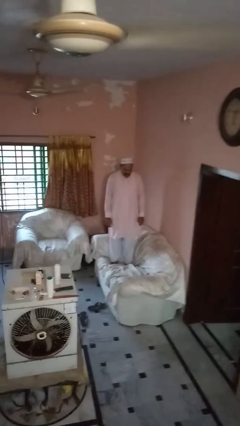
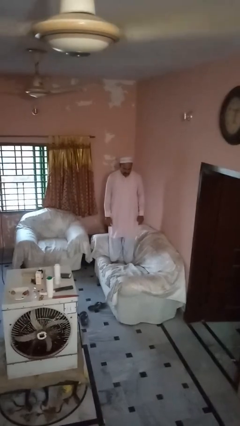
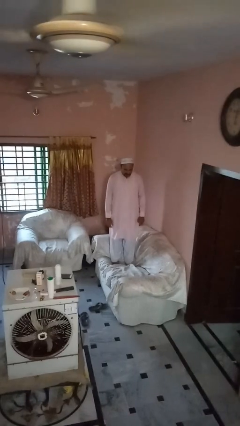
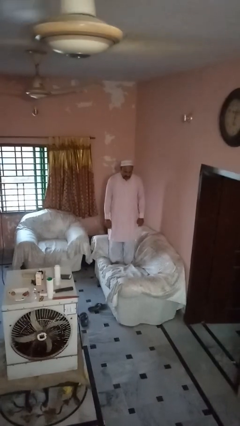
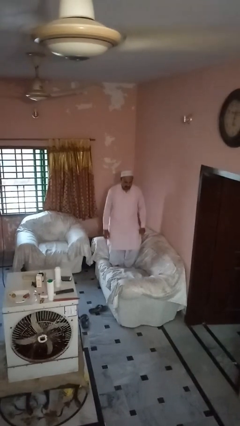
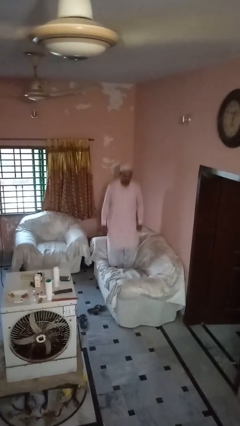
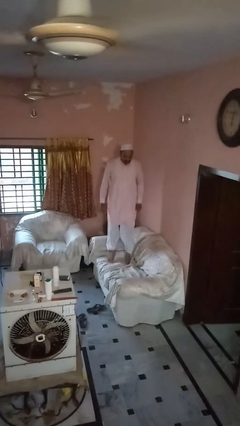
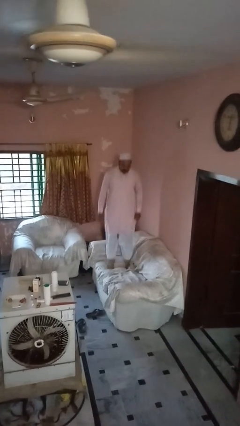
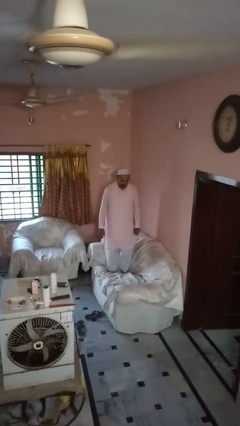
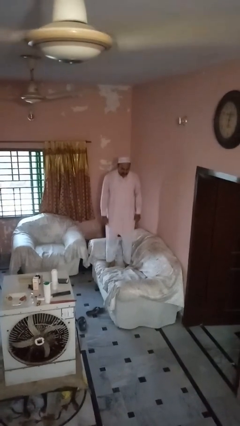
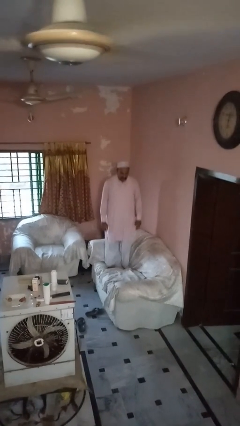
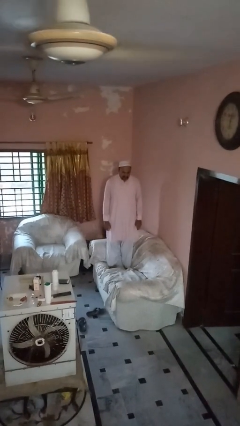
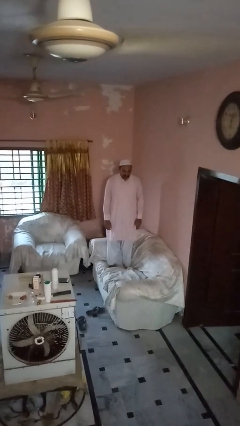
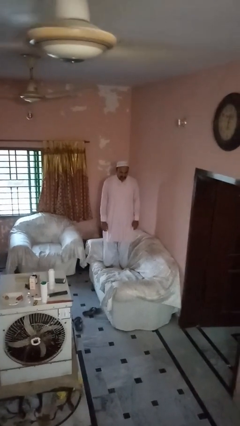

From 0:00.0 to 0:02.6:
person jumps on couch

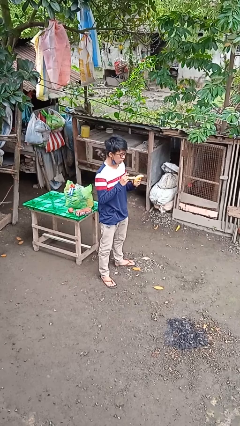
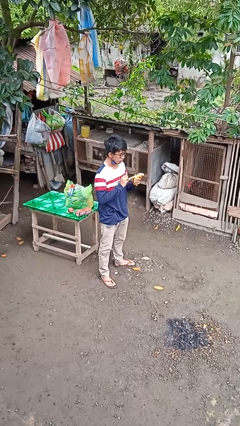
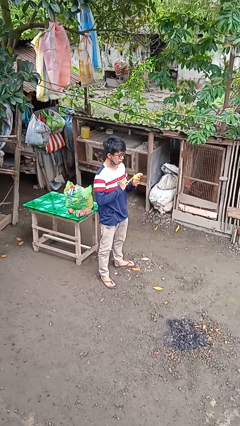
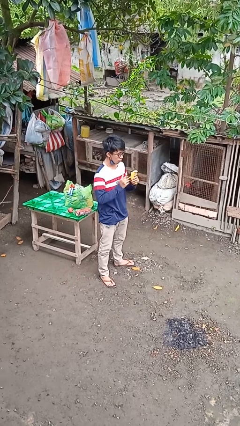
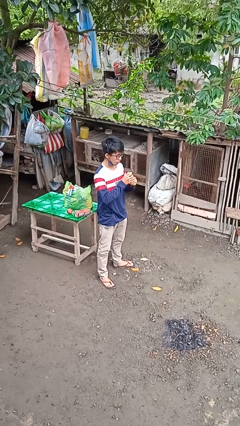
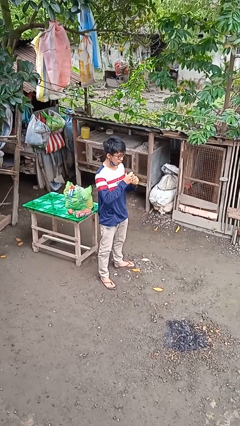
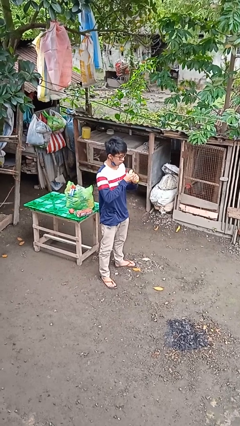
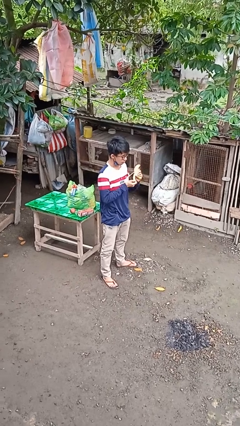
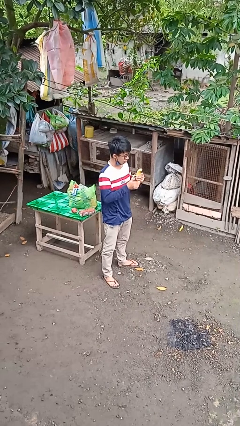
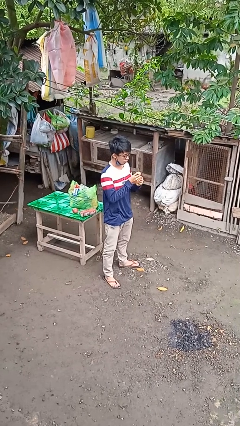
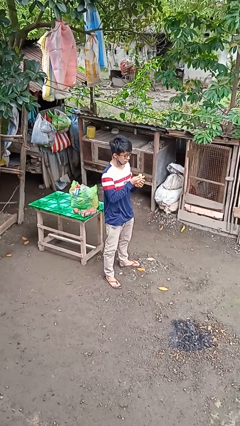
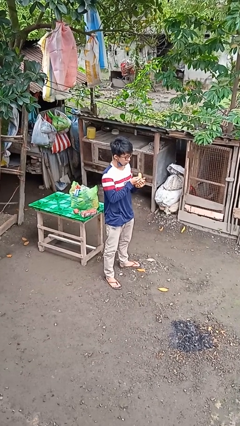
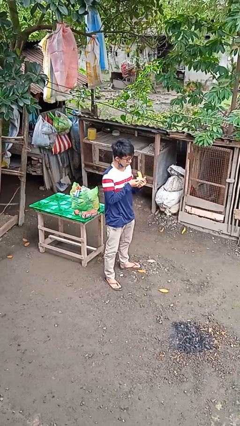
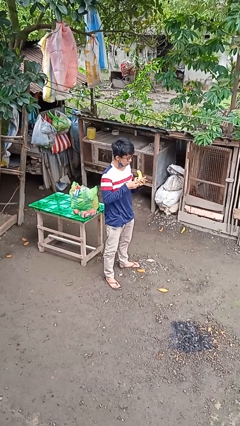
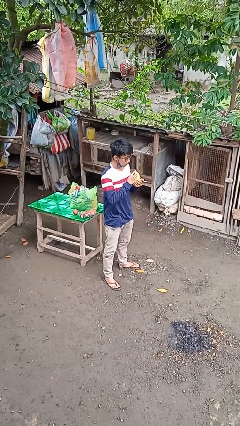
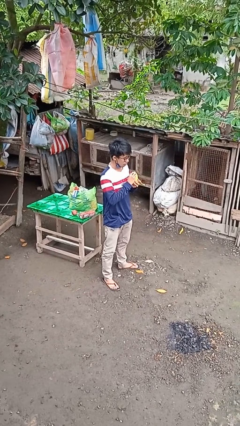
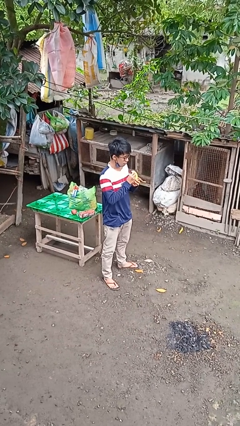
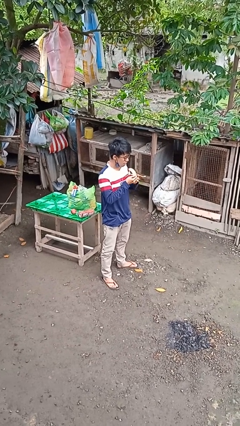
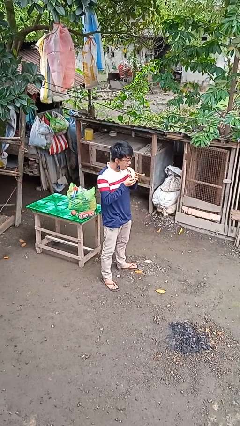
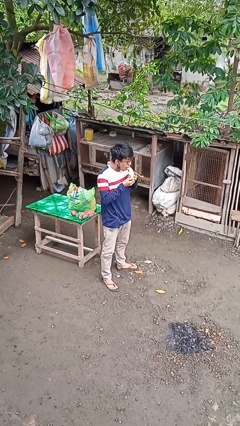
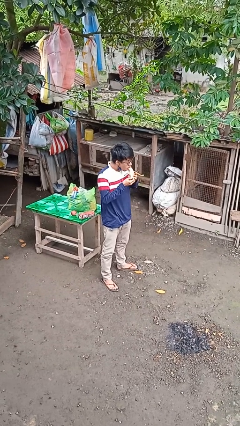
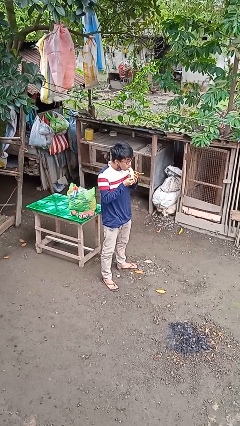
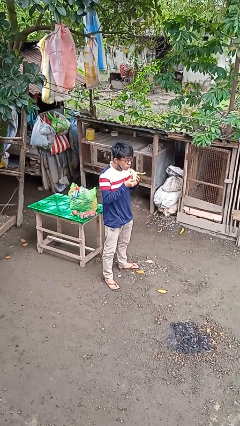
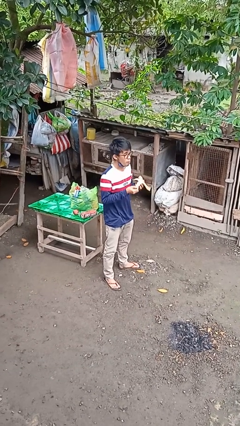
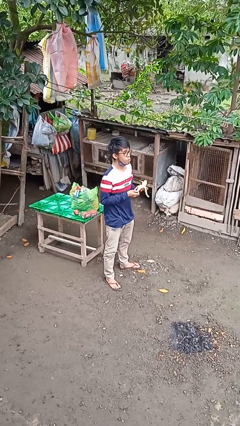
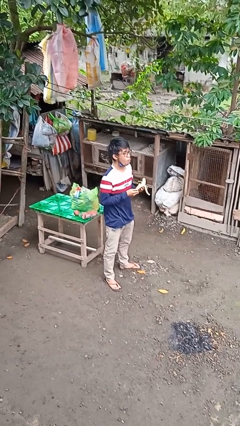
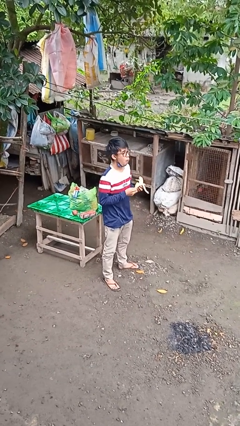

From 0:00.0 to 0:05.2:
person eats banana

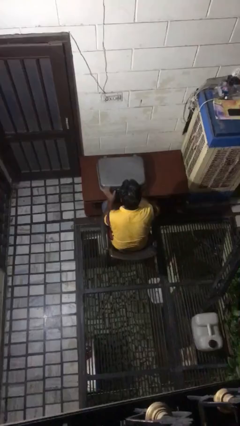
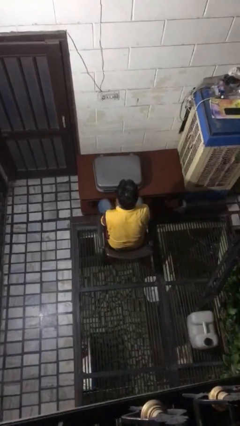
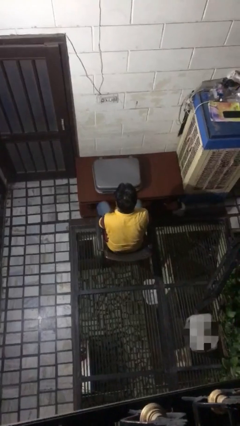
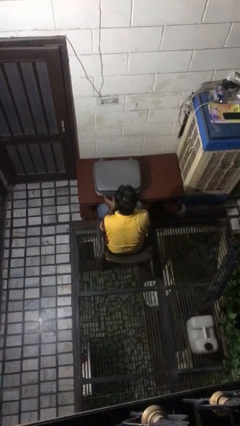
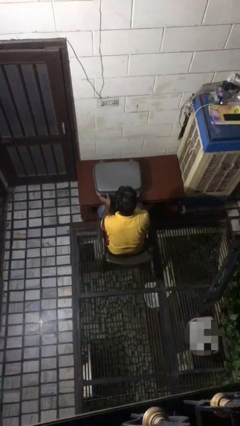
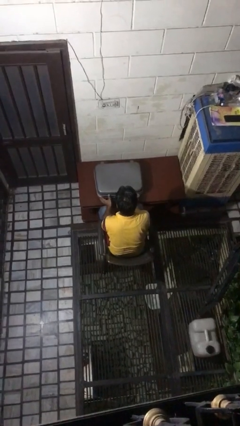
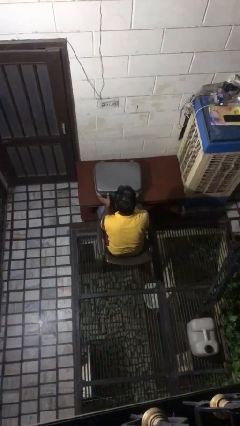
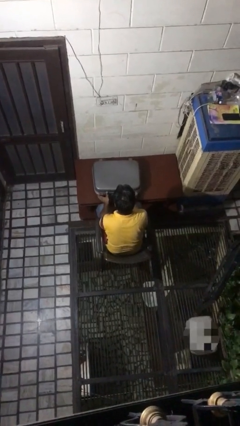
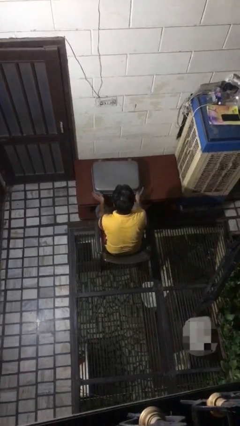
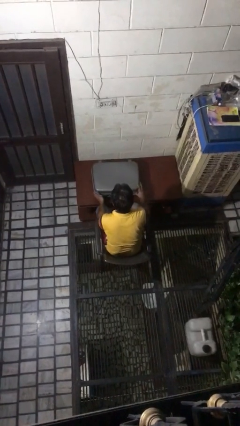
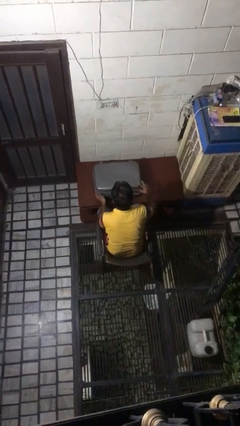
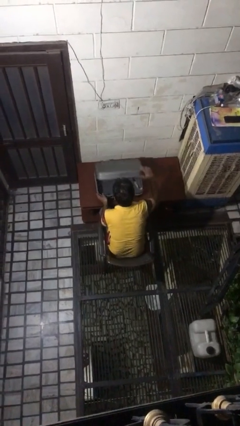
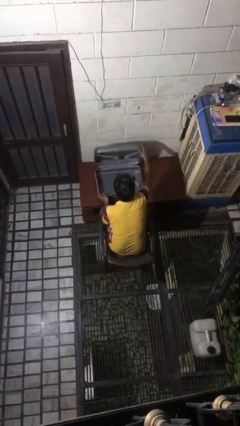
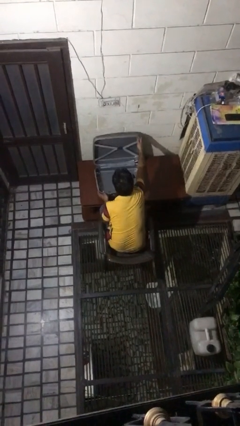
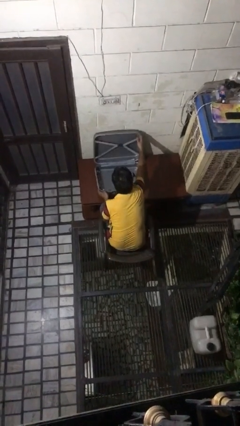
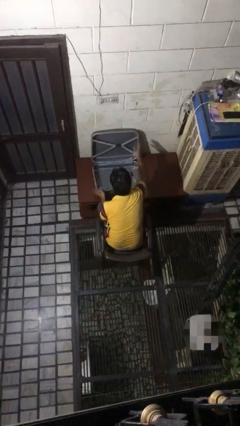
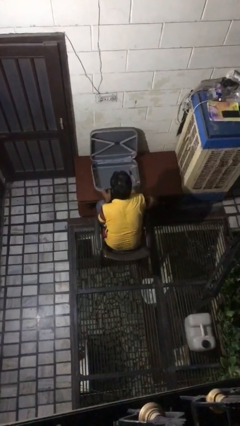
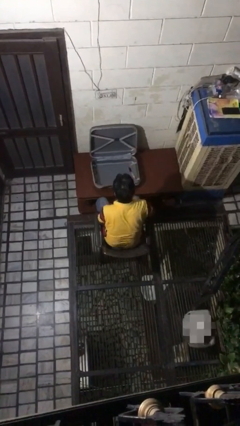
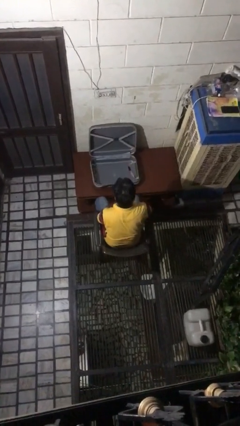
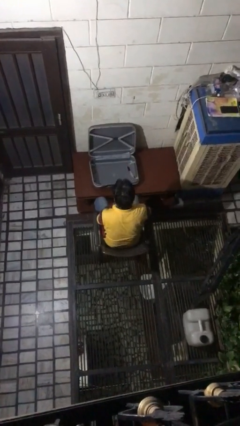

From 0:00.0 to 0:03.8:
person opens suitcase

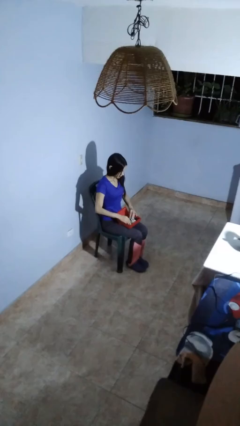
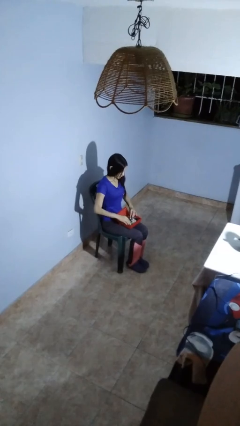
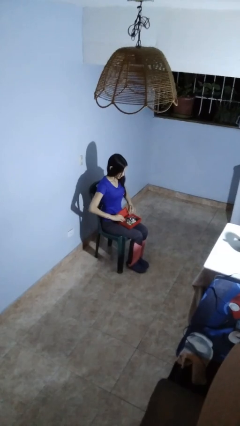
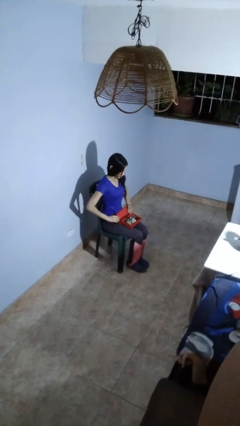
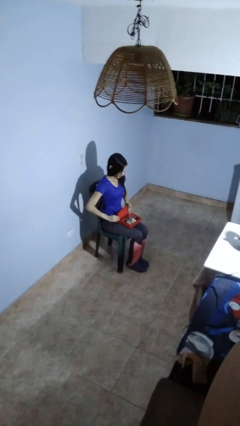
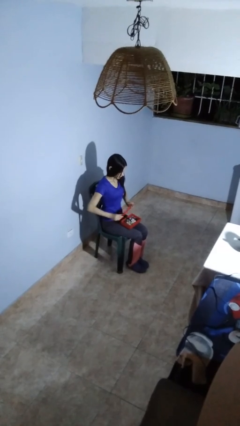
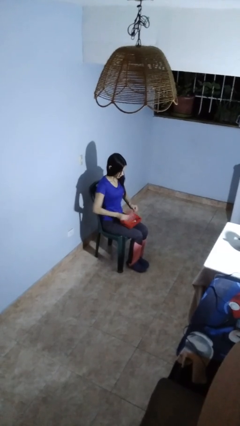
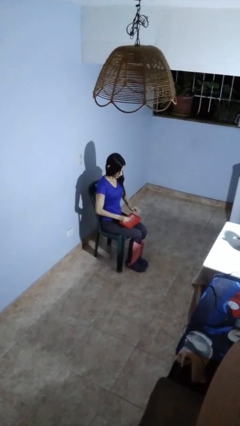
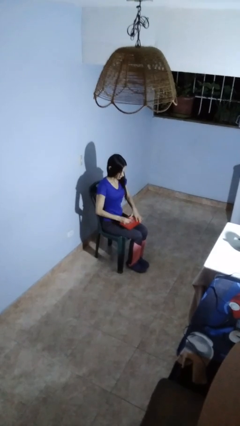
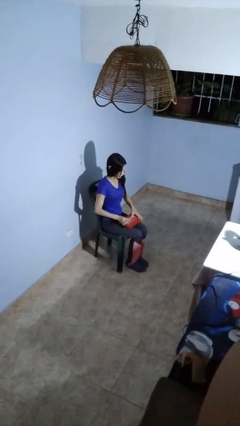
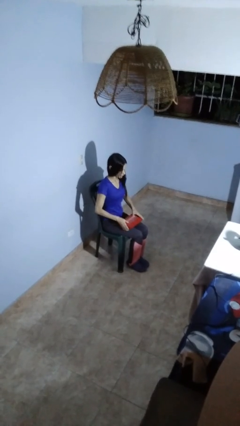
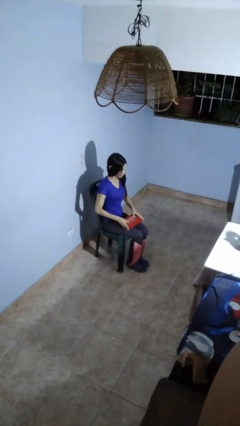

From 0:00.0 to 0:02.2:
person closes jewelry box

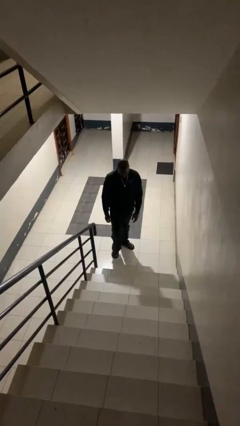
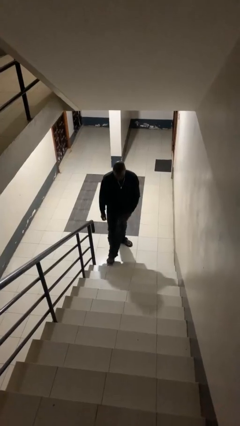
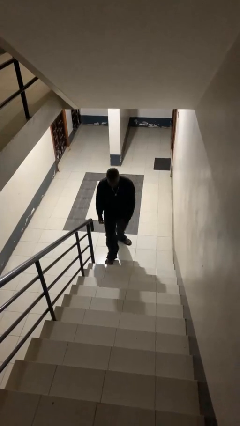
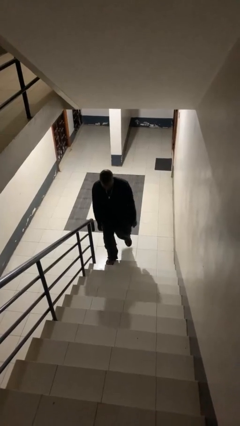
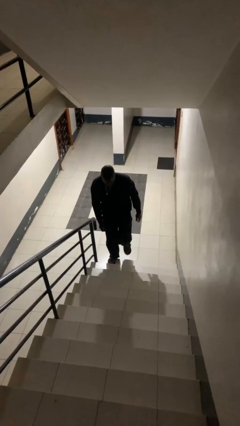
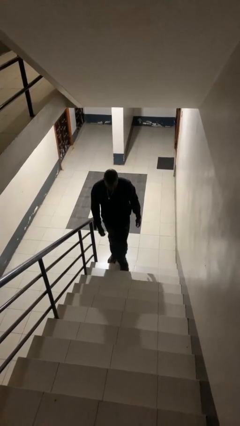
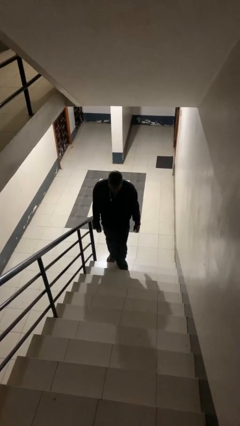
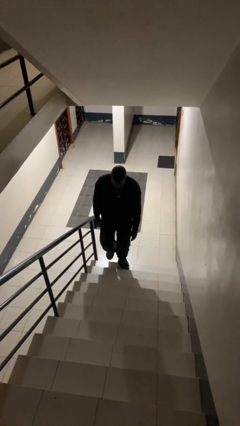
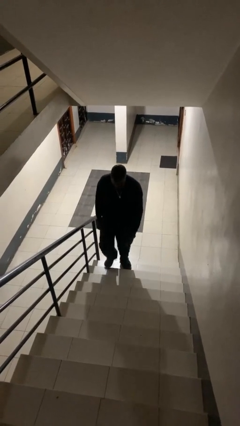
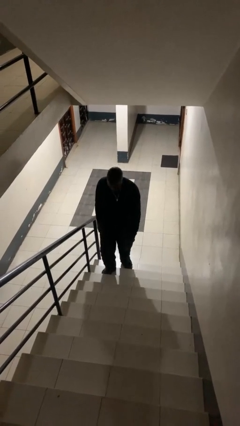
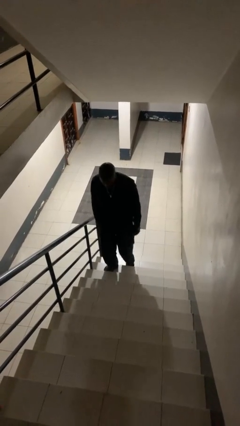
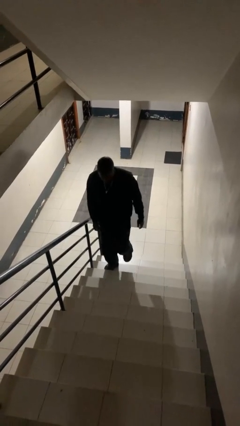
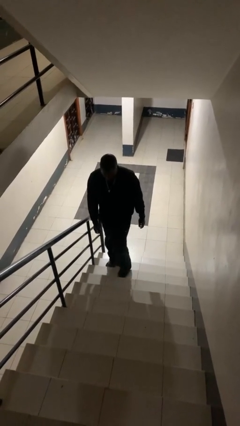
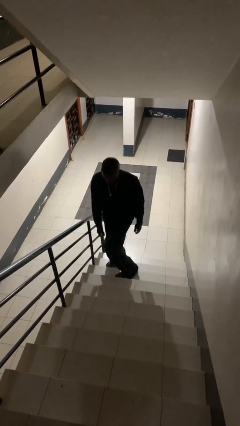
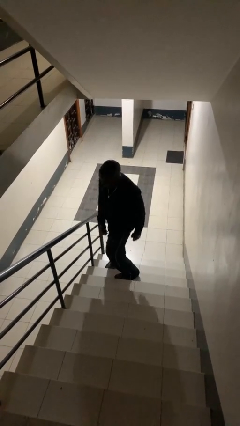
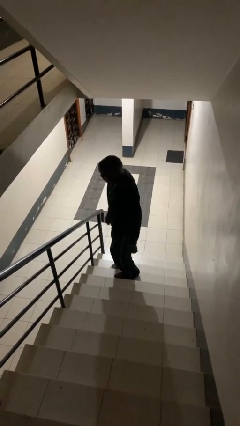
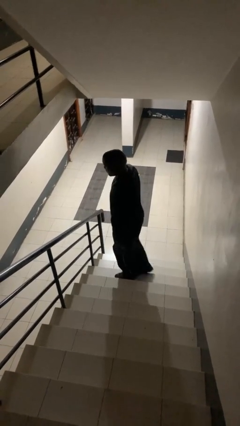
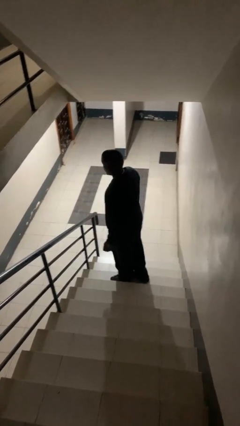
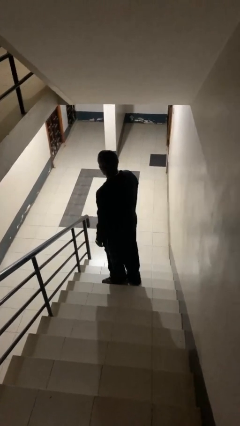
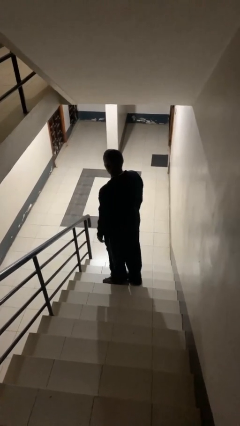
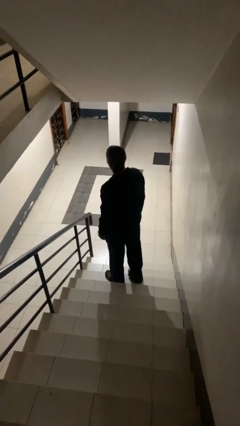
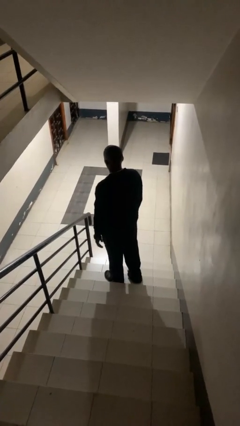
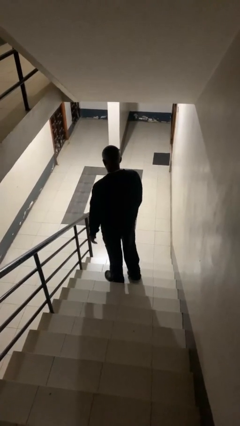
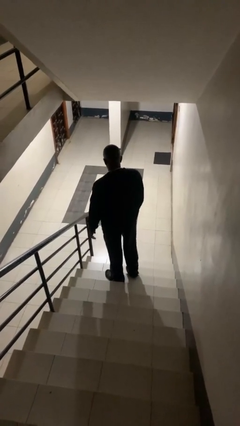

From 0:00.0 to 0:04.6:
person climbs up stairs
